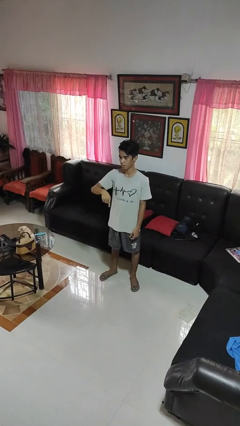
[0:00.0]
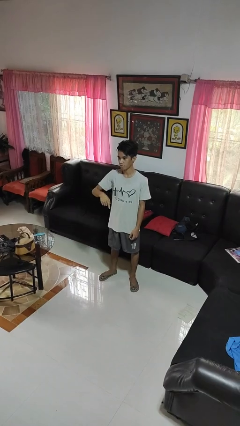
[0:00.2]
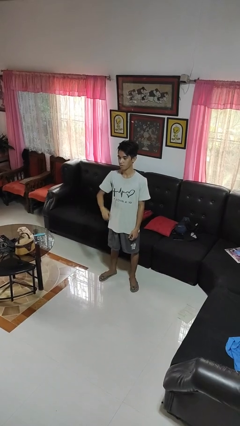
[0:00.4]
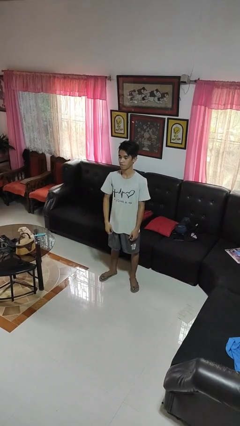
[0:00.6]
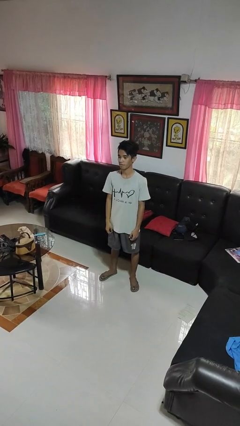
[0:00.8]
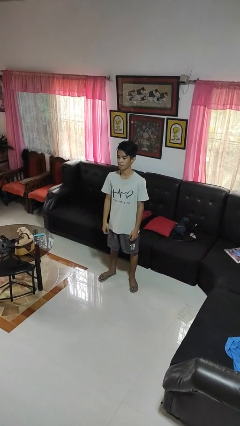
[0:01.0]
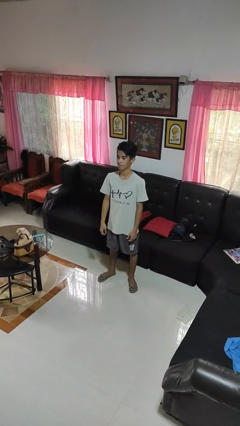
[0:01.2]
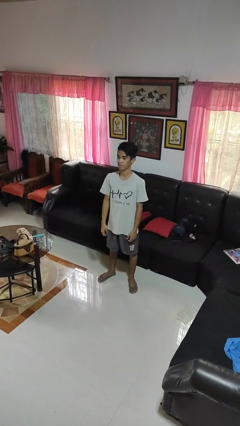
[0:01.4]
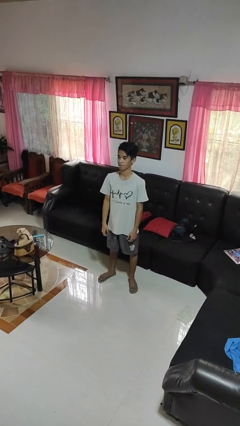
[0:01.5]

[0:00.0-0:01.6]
person gestures swipe down

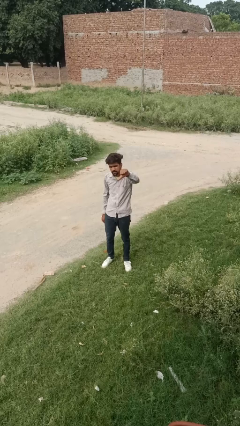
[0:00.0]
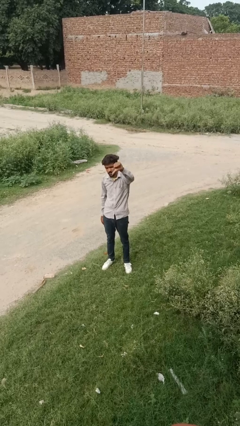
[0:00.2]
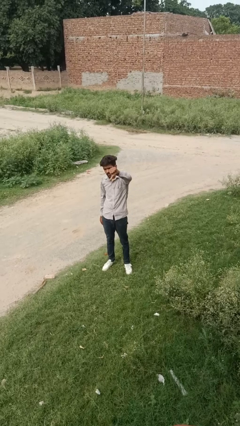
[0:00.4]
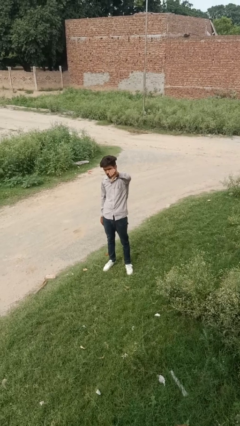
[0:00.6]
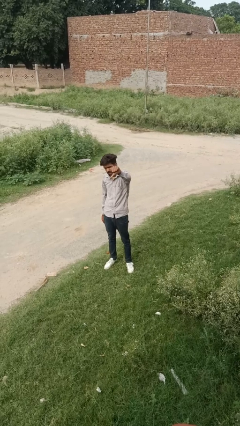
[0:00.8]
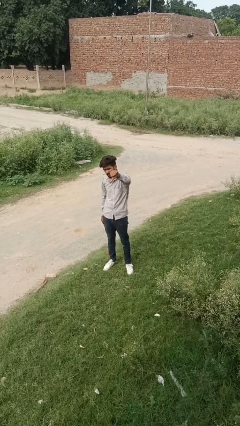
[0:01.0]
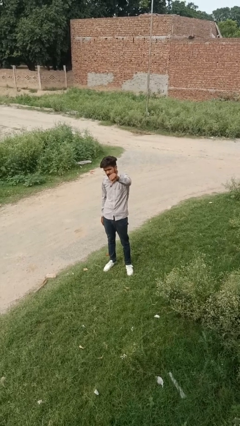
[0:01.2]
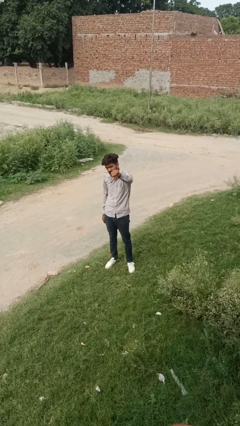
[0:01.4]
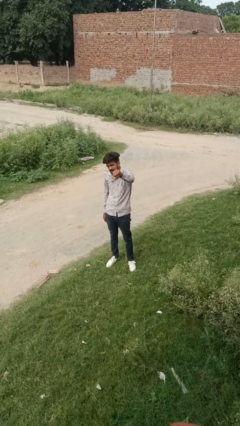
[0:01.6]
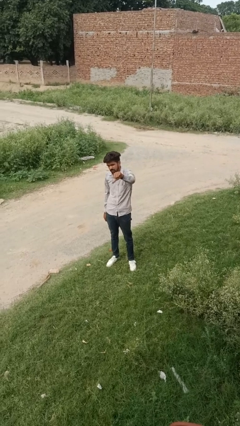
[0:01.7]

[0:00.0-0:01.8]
person gestures thumbs down

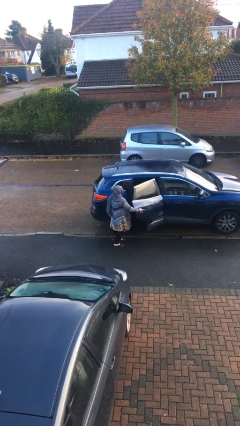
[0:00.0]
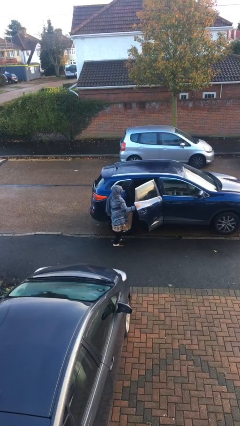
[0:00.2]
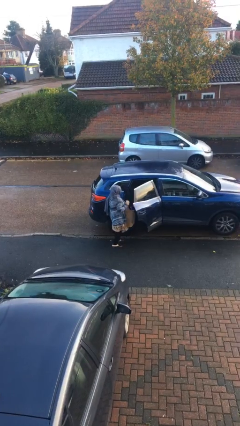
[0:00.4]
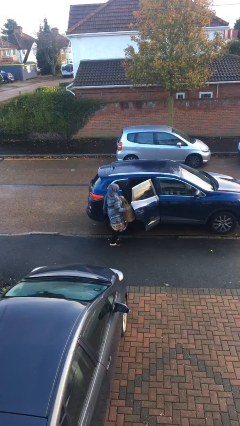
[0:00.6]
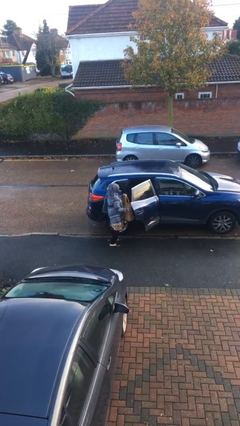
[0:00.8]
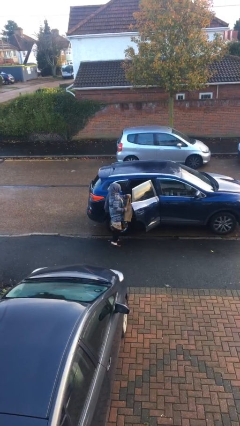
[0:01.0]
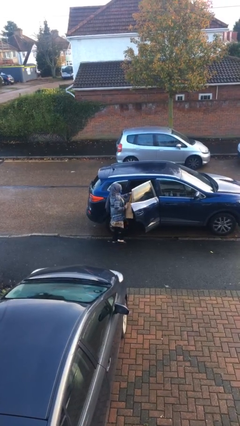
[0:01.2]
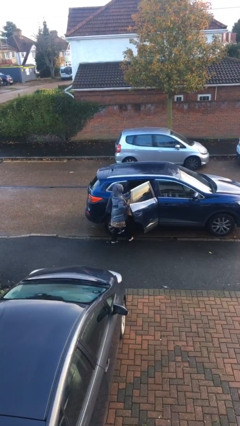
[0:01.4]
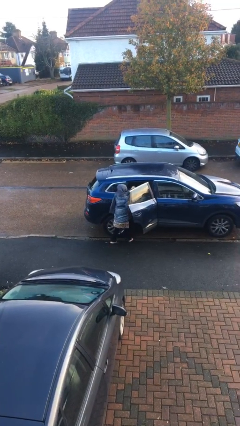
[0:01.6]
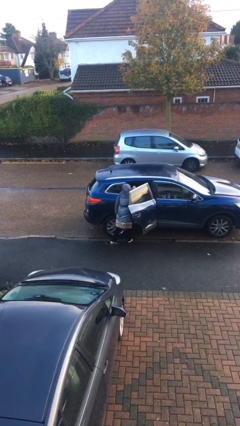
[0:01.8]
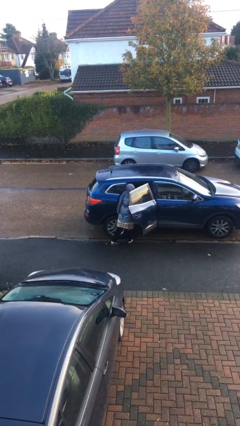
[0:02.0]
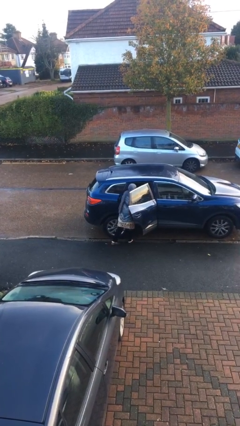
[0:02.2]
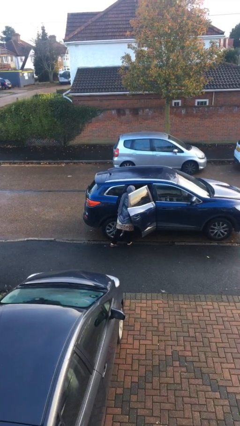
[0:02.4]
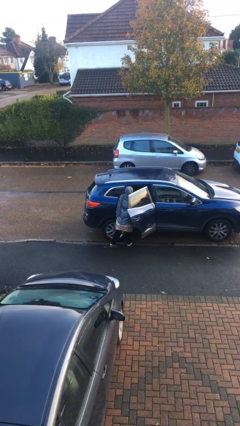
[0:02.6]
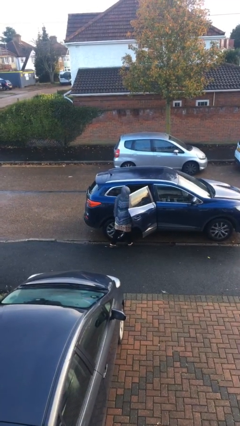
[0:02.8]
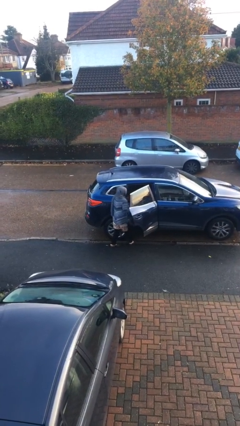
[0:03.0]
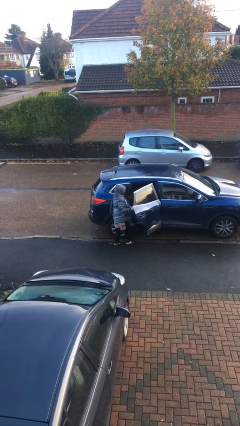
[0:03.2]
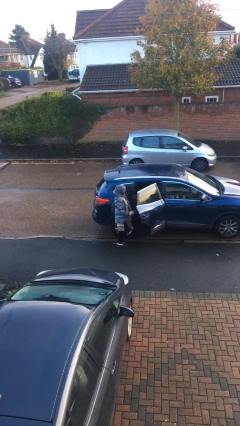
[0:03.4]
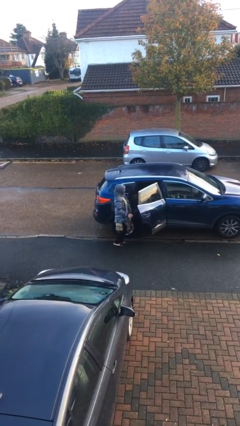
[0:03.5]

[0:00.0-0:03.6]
person loads car

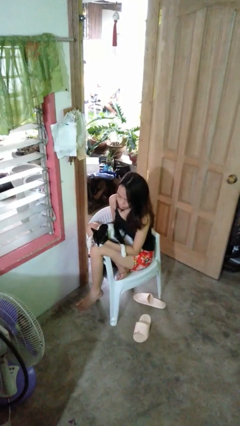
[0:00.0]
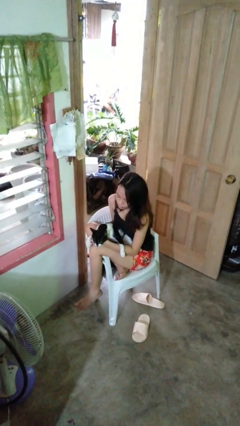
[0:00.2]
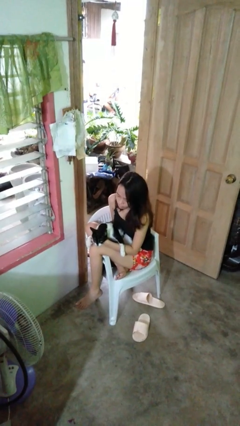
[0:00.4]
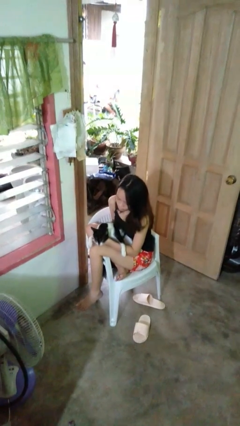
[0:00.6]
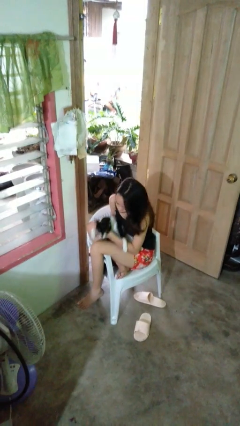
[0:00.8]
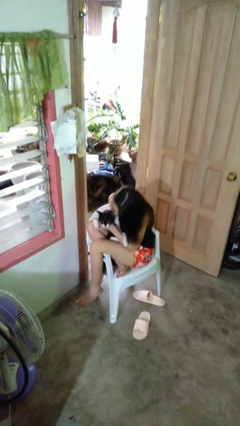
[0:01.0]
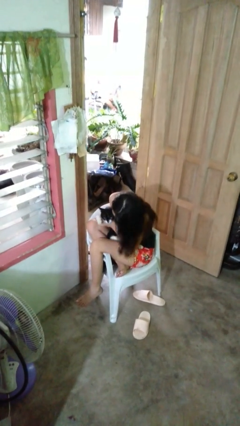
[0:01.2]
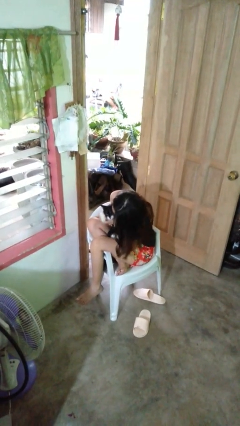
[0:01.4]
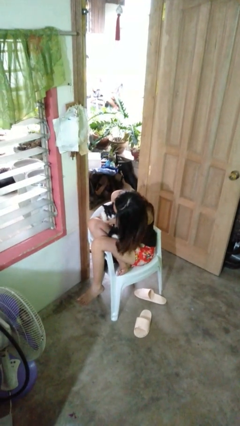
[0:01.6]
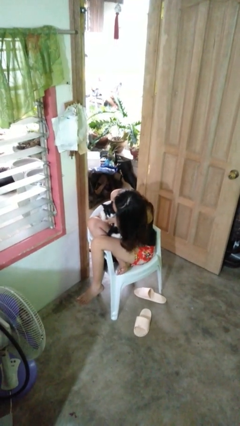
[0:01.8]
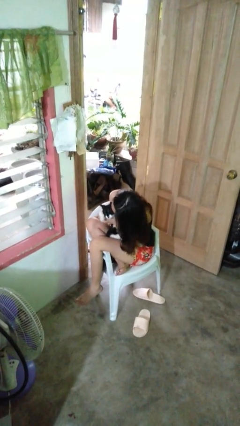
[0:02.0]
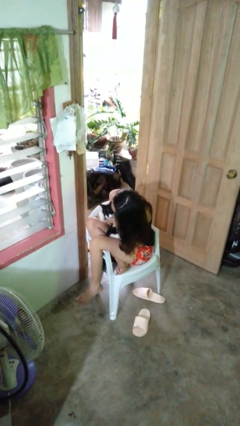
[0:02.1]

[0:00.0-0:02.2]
person hugs cat

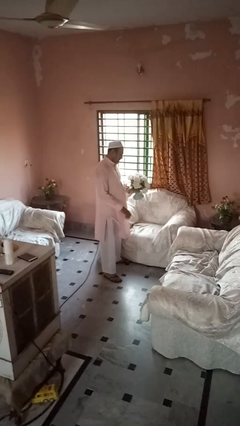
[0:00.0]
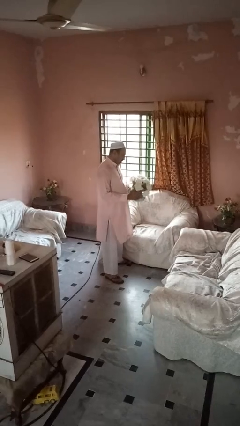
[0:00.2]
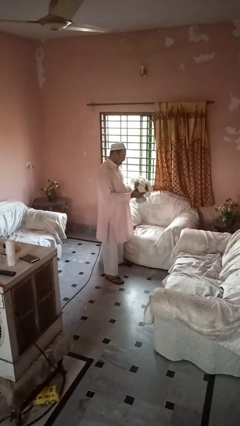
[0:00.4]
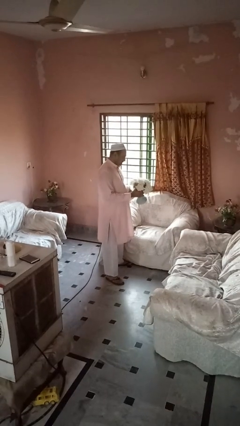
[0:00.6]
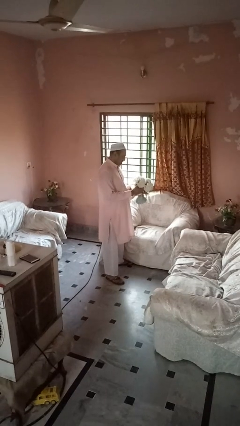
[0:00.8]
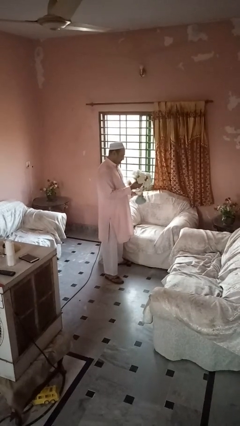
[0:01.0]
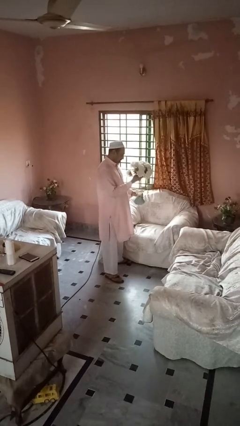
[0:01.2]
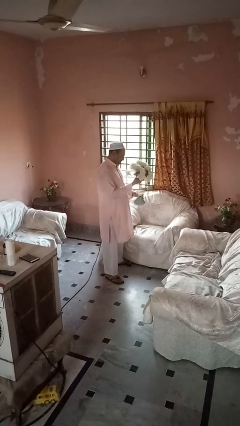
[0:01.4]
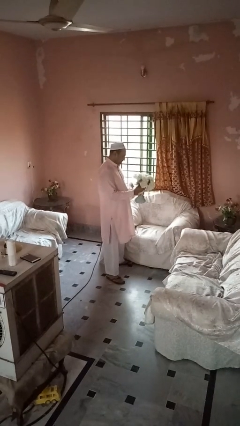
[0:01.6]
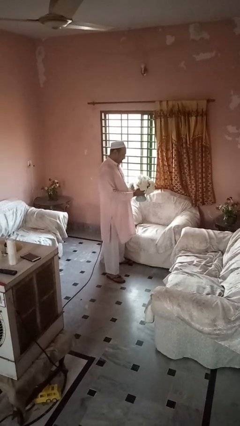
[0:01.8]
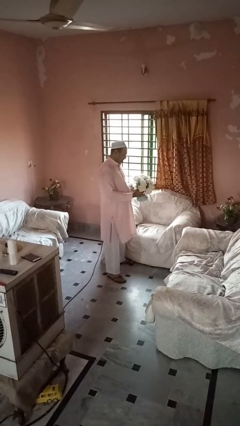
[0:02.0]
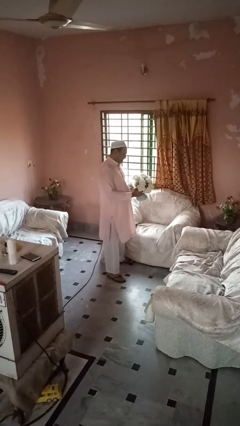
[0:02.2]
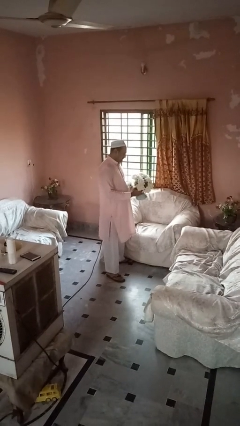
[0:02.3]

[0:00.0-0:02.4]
person arranges flowers in vase

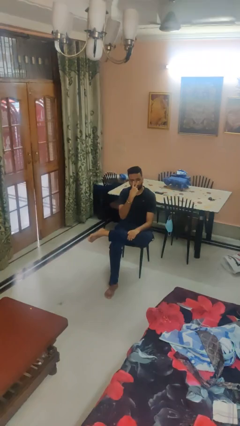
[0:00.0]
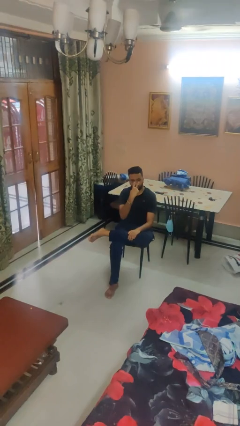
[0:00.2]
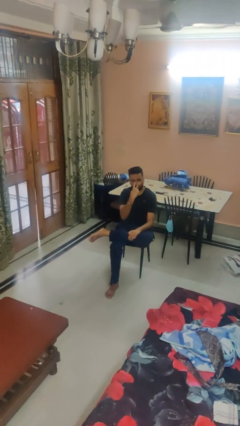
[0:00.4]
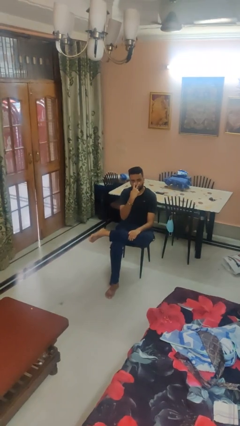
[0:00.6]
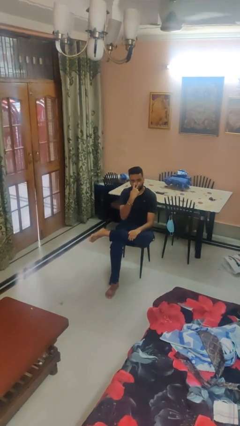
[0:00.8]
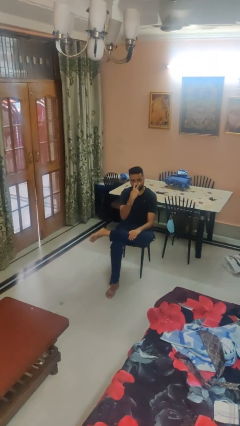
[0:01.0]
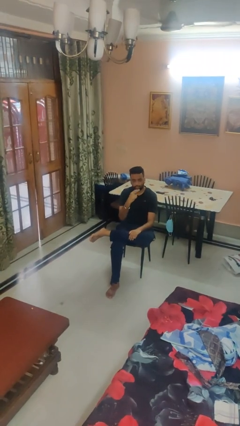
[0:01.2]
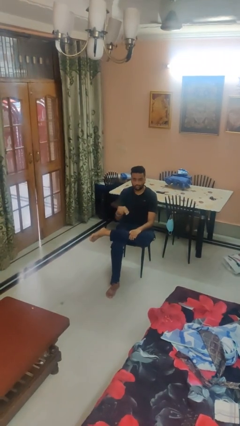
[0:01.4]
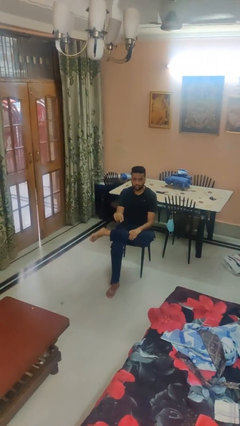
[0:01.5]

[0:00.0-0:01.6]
person gestures watch closely

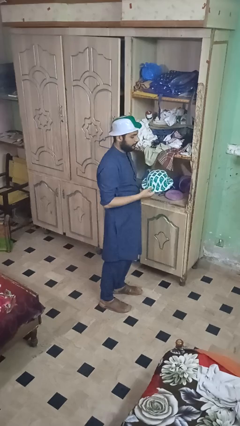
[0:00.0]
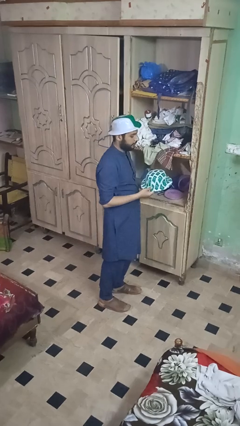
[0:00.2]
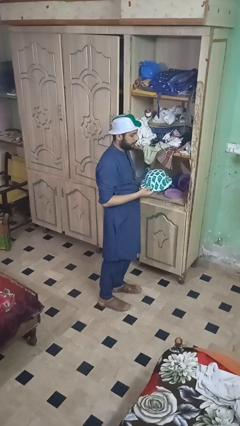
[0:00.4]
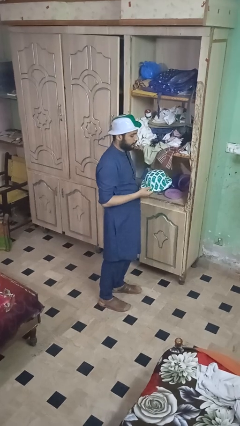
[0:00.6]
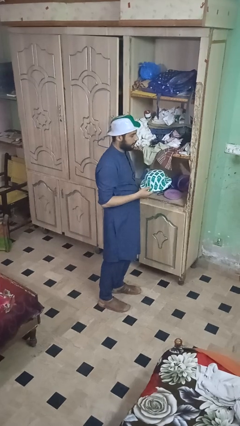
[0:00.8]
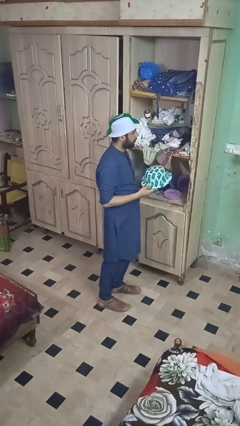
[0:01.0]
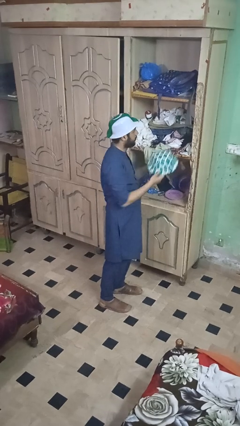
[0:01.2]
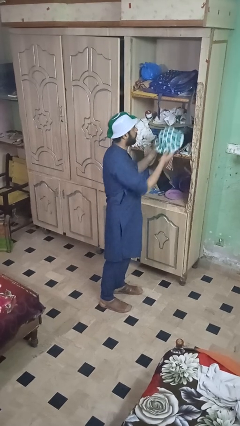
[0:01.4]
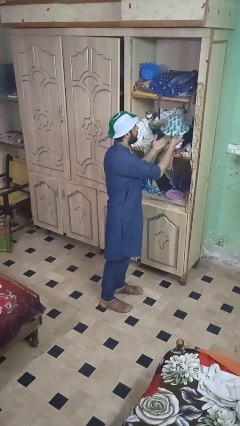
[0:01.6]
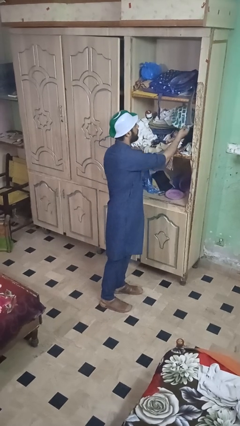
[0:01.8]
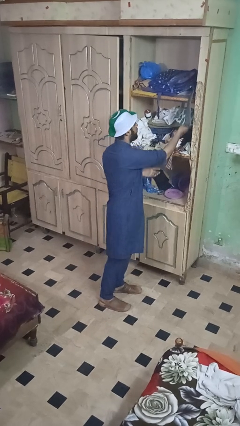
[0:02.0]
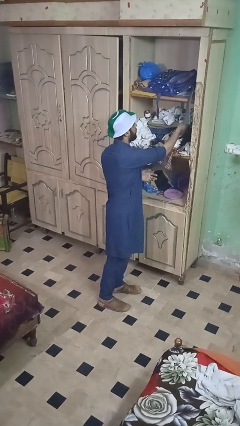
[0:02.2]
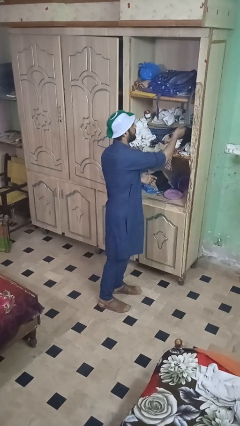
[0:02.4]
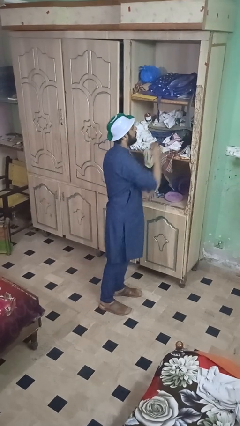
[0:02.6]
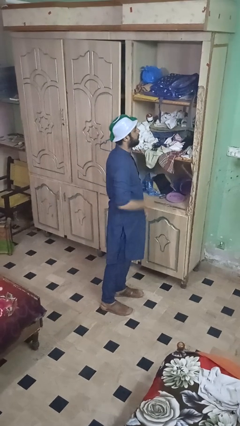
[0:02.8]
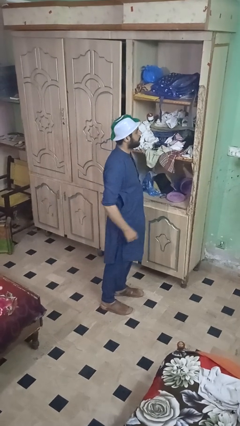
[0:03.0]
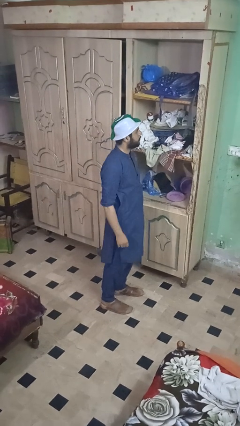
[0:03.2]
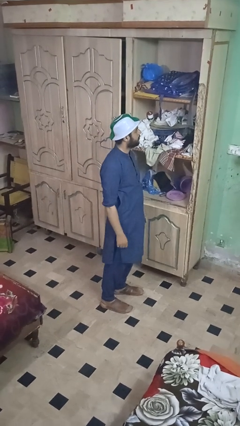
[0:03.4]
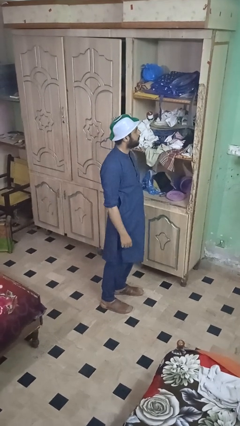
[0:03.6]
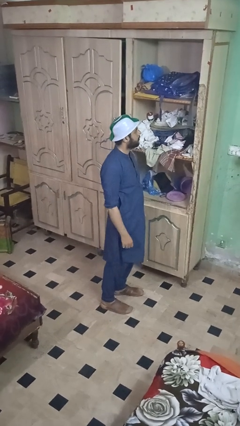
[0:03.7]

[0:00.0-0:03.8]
person puts down object on shelf

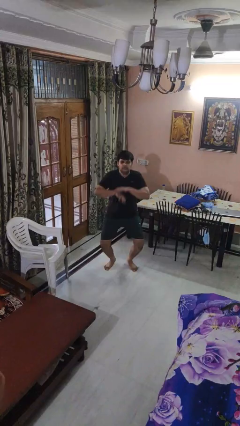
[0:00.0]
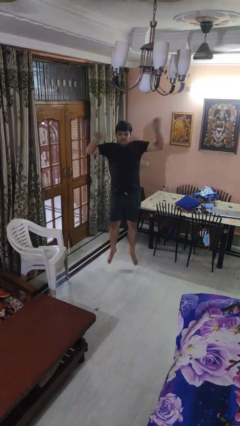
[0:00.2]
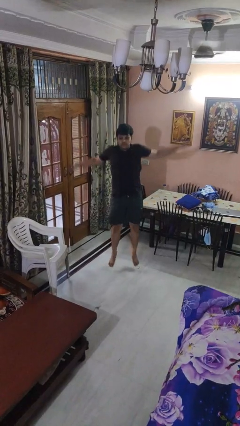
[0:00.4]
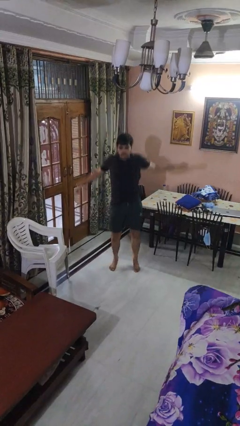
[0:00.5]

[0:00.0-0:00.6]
person jumps
